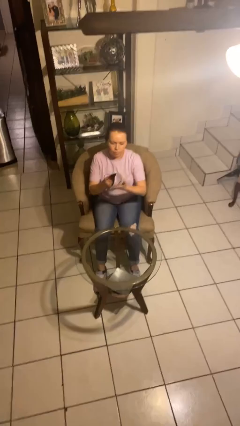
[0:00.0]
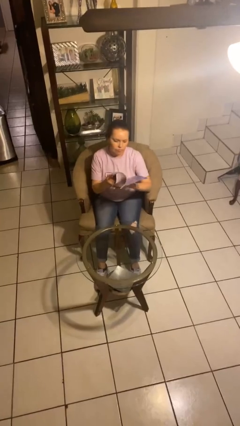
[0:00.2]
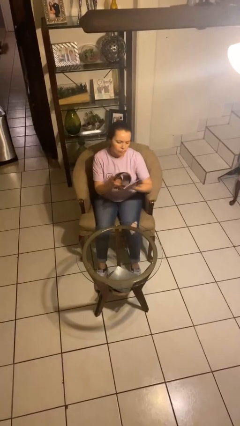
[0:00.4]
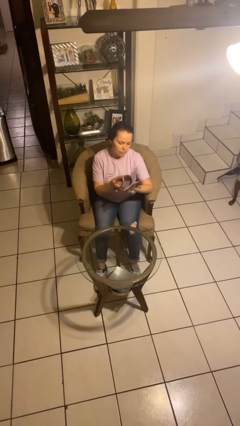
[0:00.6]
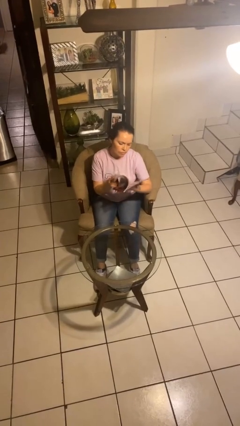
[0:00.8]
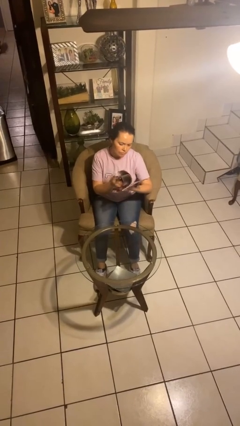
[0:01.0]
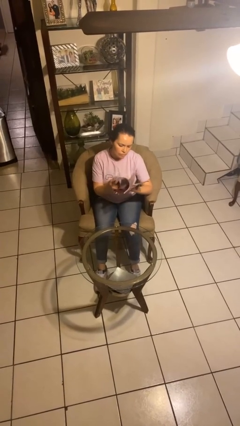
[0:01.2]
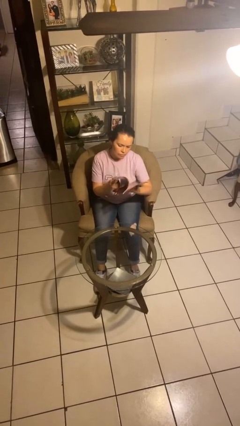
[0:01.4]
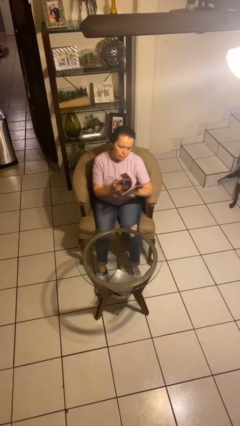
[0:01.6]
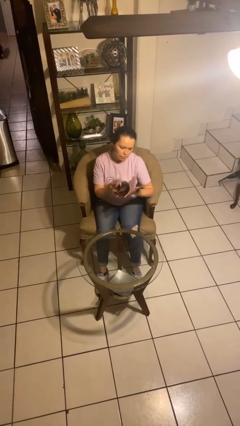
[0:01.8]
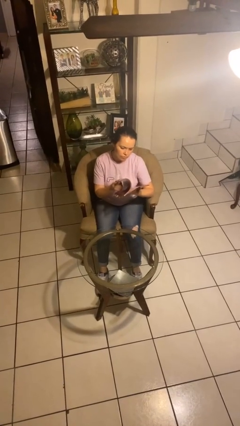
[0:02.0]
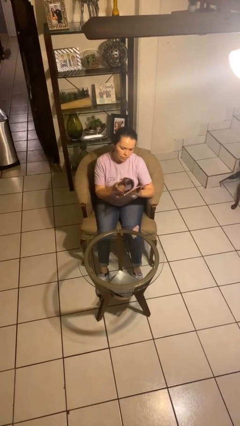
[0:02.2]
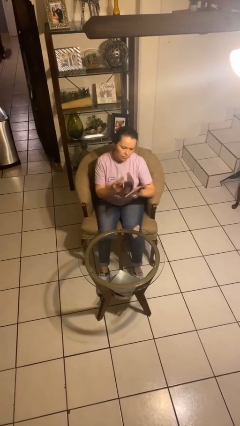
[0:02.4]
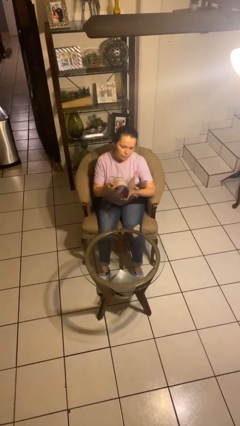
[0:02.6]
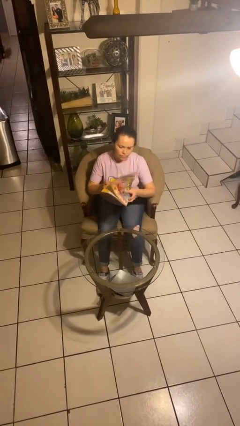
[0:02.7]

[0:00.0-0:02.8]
person reads magazine

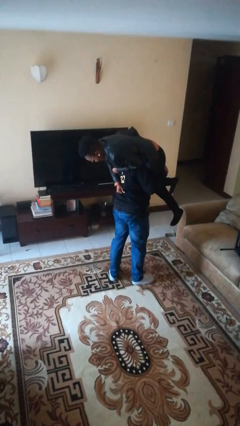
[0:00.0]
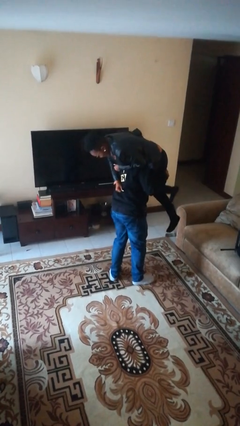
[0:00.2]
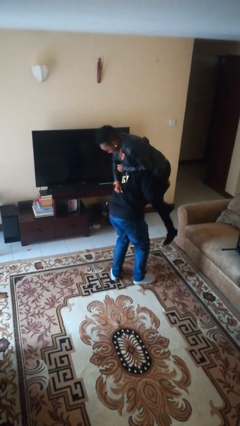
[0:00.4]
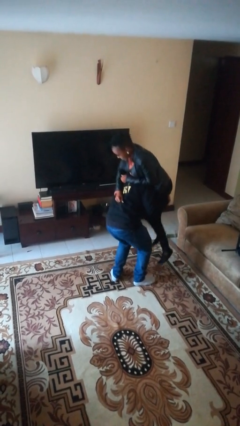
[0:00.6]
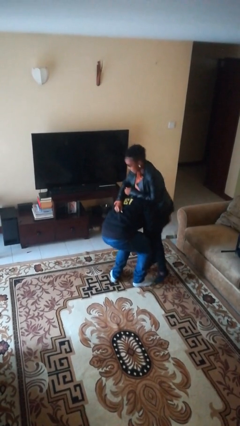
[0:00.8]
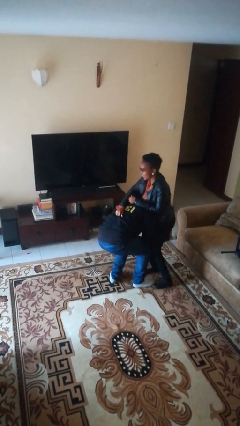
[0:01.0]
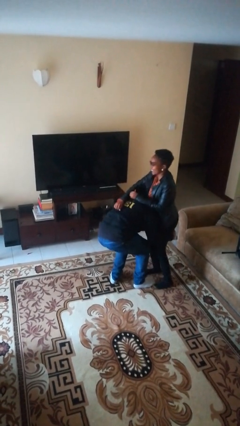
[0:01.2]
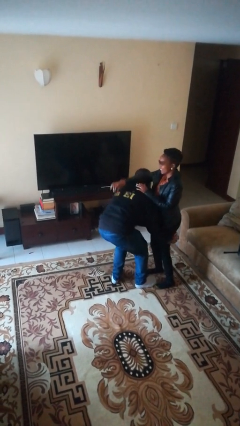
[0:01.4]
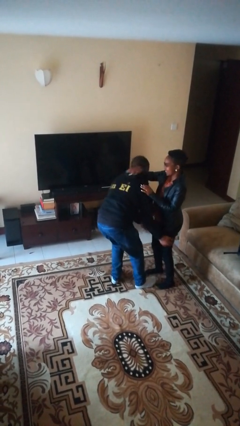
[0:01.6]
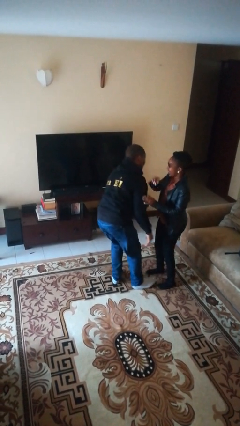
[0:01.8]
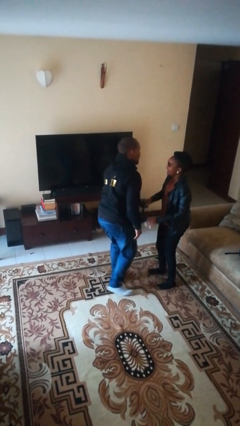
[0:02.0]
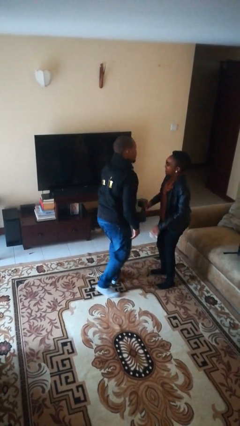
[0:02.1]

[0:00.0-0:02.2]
person puts down person

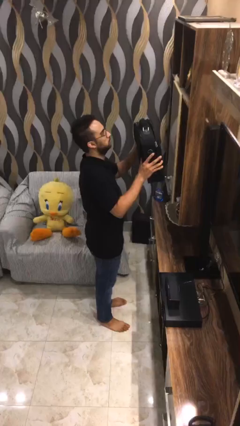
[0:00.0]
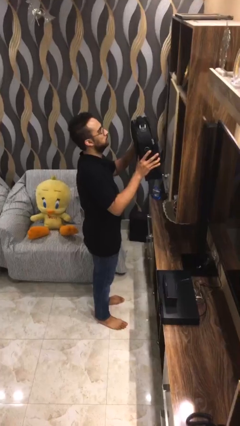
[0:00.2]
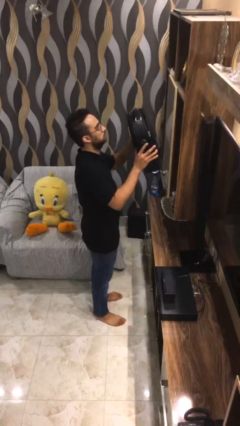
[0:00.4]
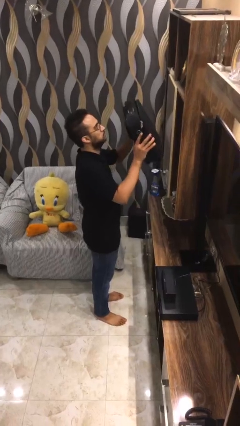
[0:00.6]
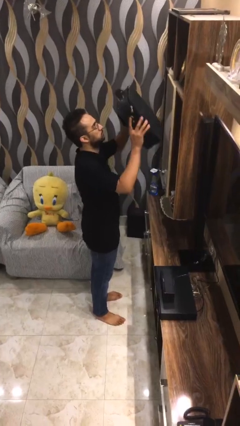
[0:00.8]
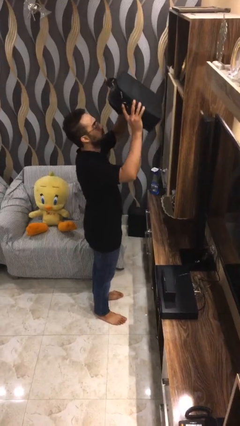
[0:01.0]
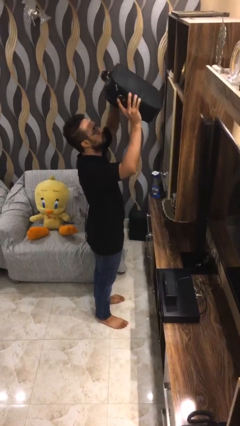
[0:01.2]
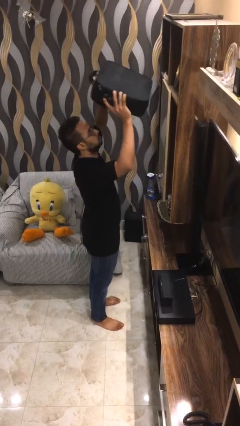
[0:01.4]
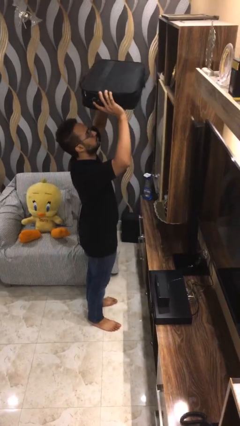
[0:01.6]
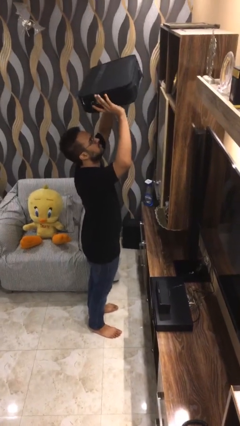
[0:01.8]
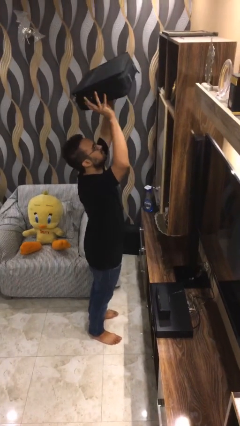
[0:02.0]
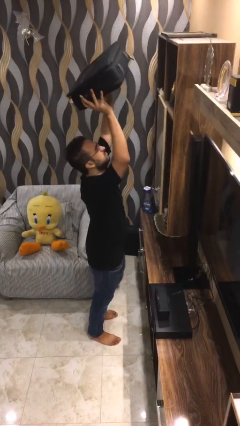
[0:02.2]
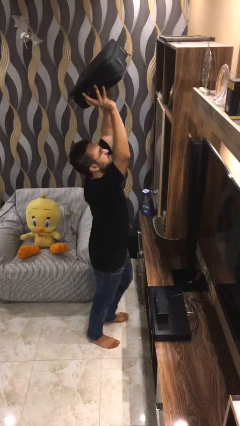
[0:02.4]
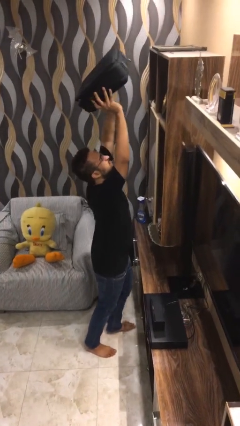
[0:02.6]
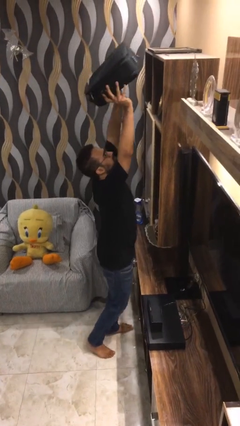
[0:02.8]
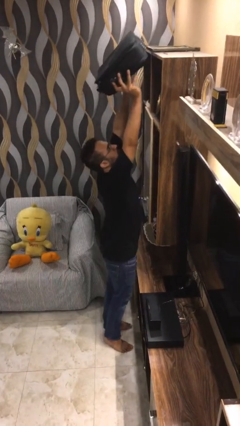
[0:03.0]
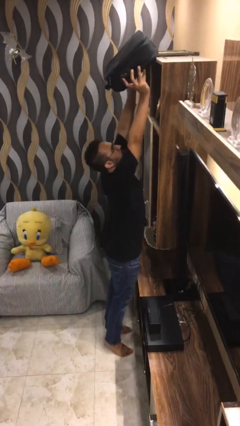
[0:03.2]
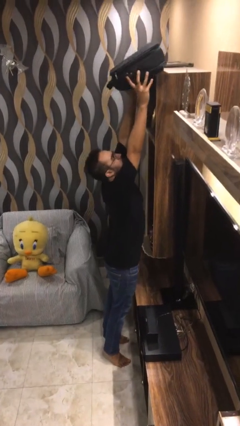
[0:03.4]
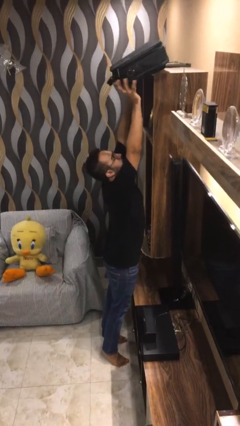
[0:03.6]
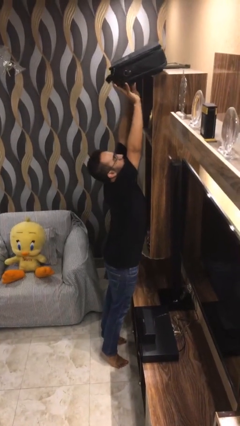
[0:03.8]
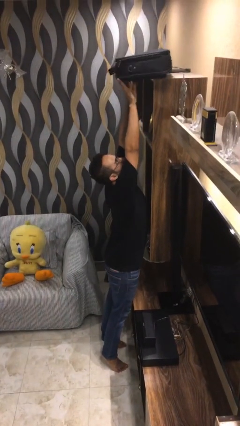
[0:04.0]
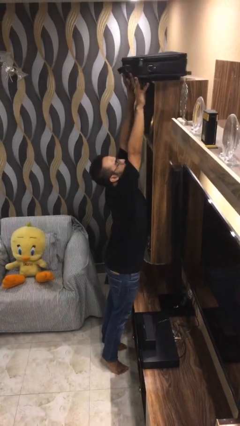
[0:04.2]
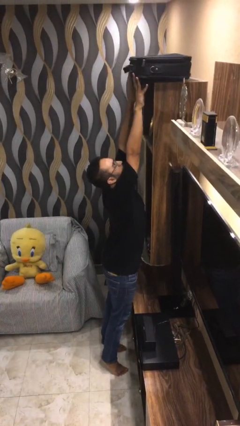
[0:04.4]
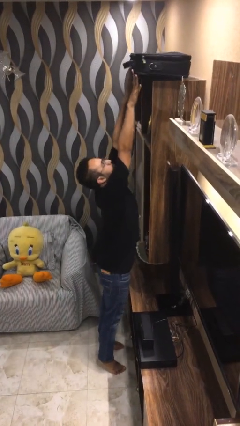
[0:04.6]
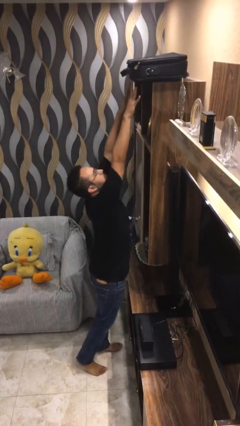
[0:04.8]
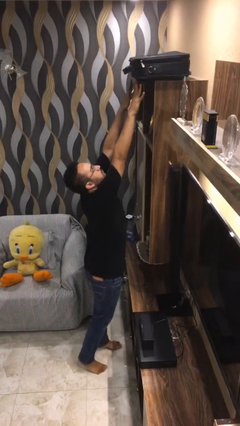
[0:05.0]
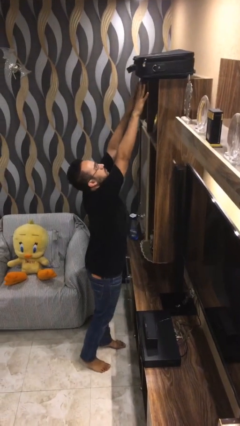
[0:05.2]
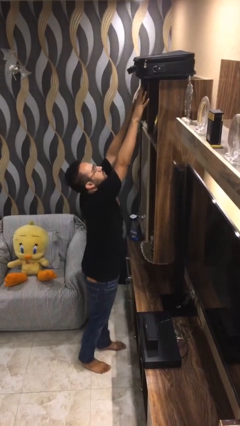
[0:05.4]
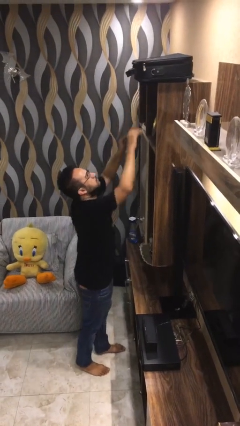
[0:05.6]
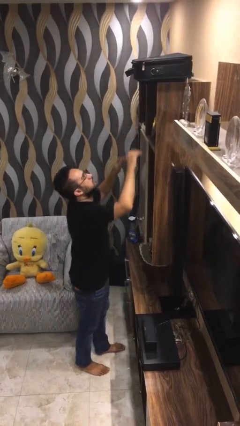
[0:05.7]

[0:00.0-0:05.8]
person puts down object on shelf

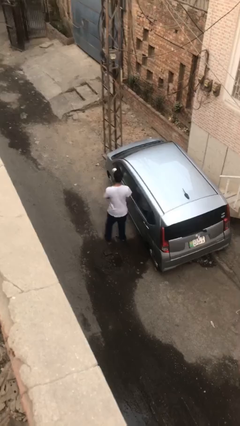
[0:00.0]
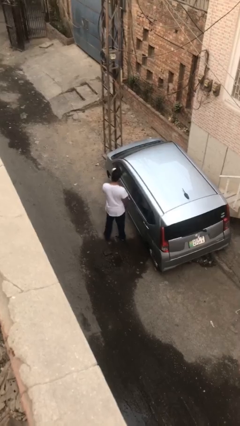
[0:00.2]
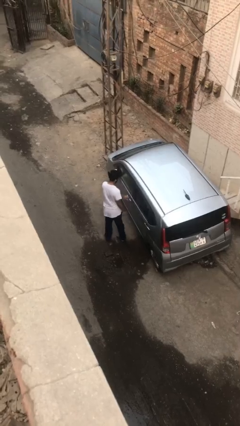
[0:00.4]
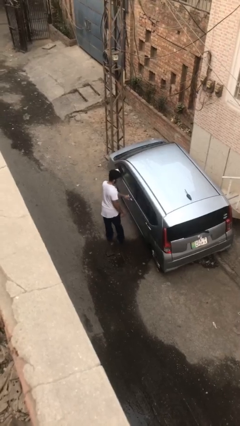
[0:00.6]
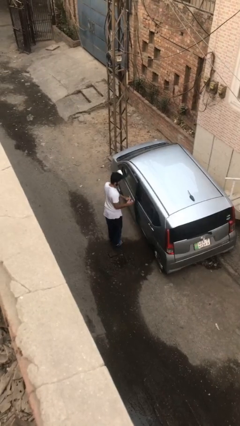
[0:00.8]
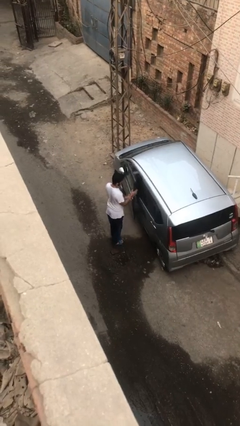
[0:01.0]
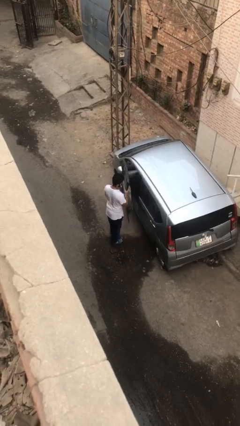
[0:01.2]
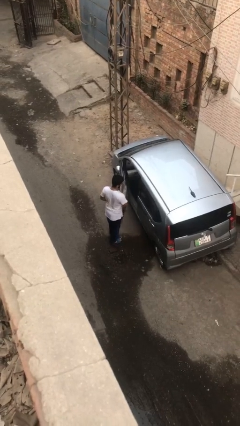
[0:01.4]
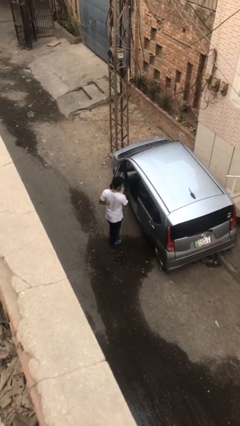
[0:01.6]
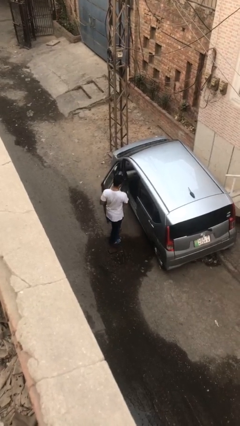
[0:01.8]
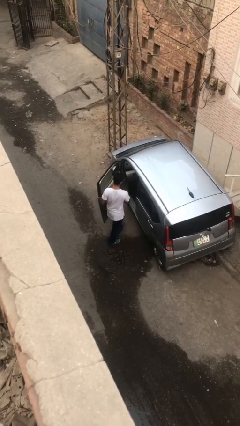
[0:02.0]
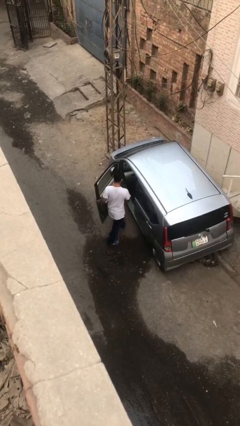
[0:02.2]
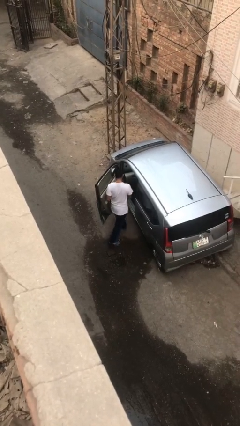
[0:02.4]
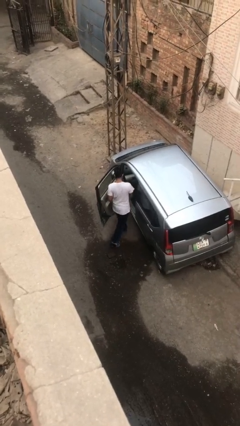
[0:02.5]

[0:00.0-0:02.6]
person opens car door

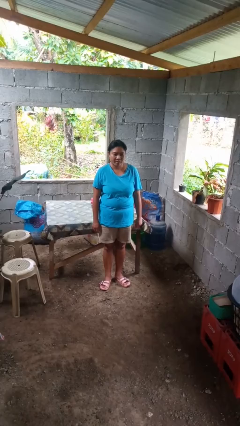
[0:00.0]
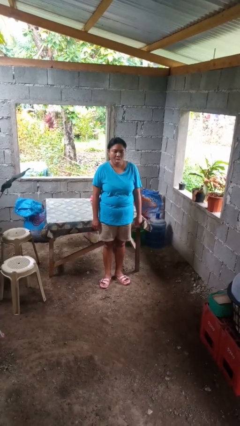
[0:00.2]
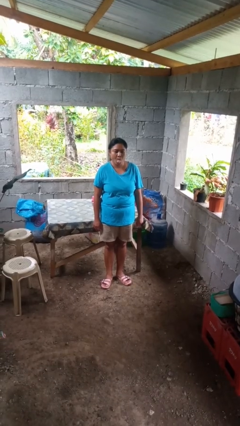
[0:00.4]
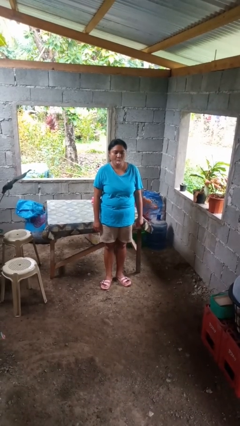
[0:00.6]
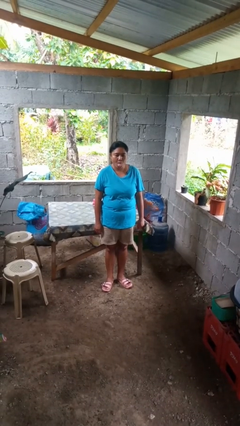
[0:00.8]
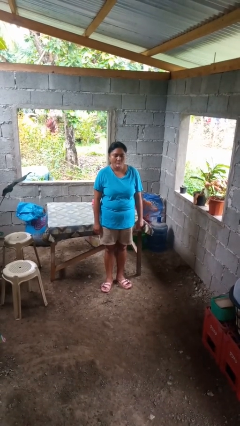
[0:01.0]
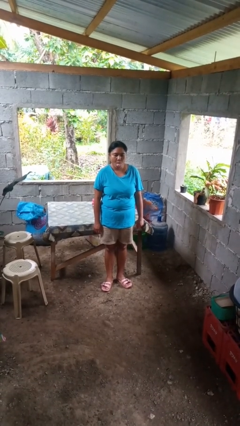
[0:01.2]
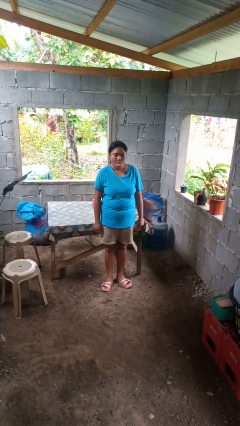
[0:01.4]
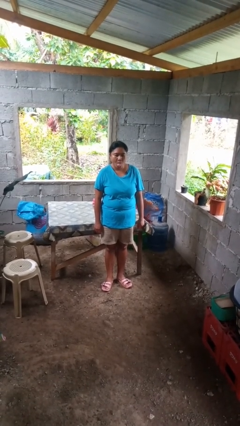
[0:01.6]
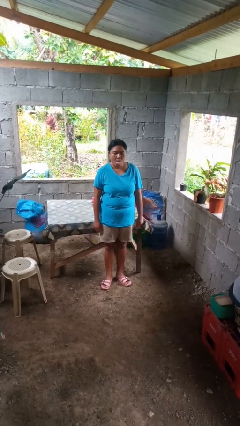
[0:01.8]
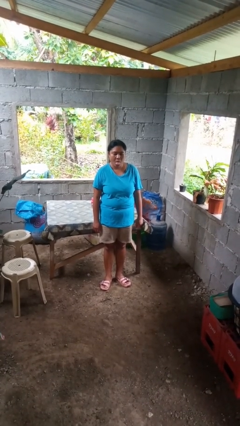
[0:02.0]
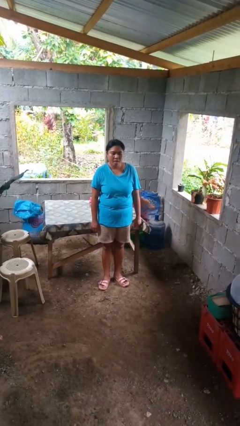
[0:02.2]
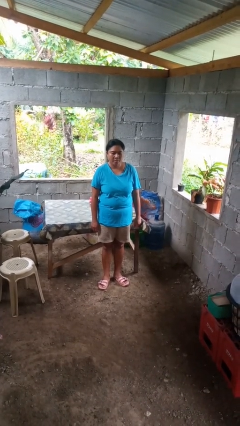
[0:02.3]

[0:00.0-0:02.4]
person sticks out tongue

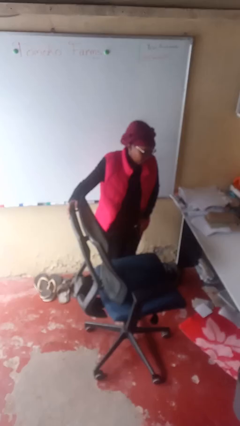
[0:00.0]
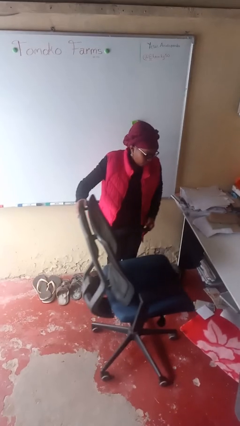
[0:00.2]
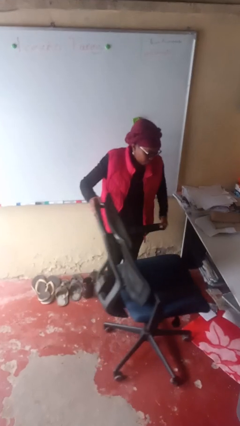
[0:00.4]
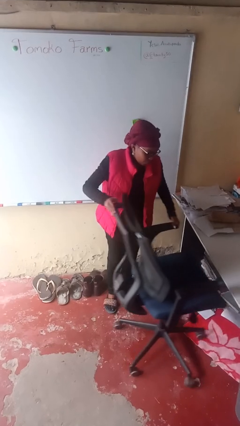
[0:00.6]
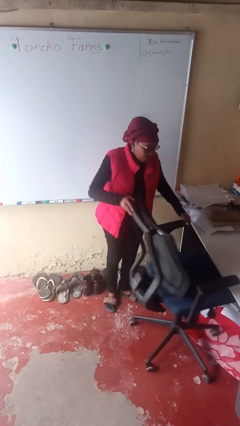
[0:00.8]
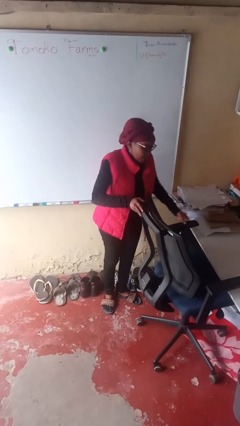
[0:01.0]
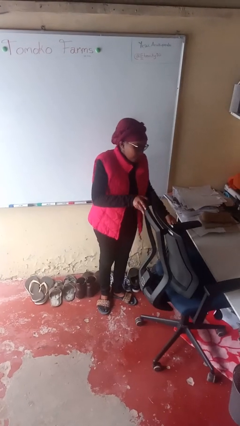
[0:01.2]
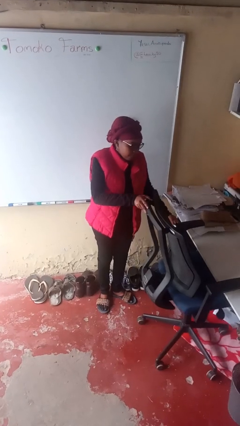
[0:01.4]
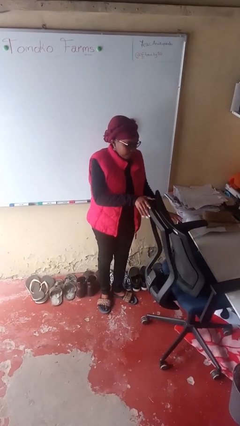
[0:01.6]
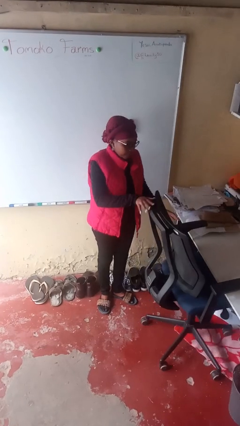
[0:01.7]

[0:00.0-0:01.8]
person pushes in chair

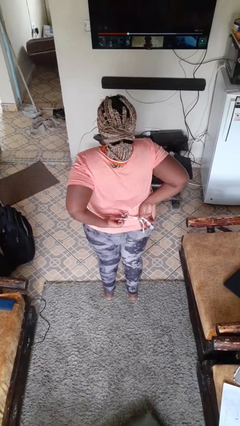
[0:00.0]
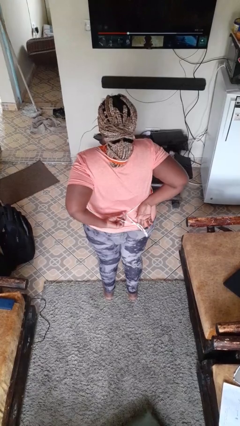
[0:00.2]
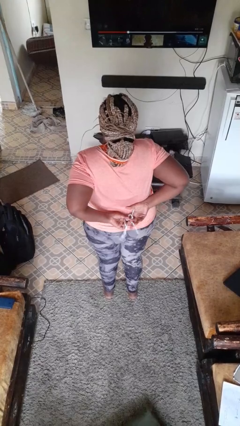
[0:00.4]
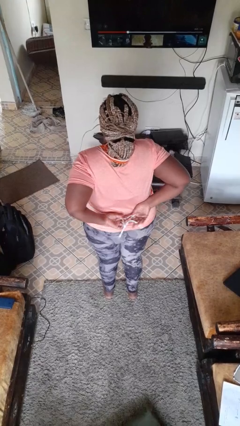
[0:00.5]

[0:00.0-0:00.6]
person takes off apron
